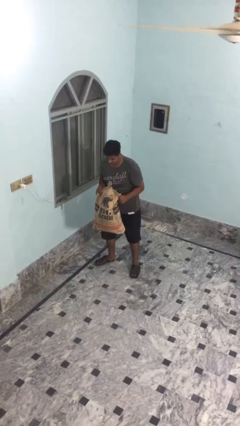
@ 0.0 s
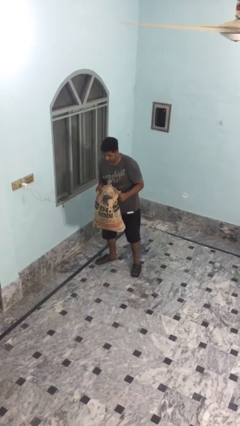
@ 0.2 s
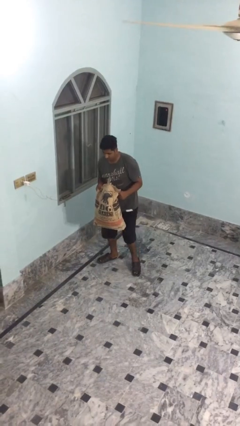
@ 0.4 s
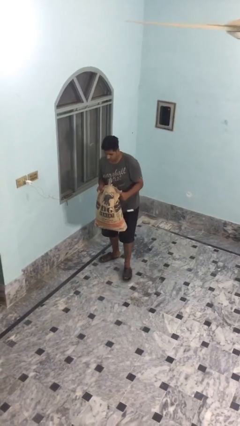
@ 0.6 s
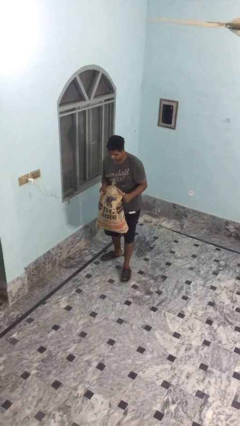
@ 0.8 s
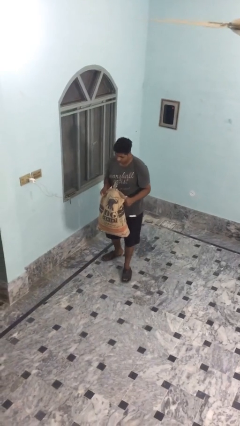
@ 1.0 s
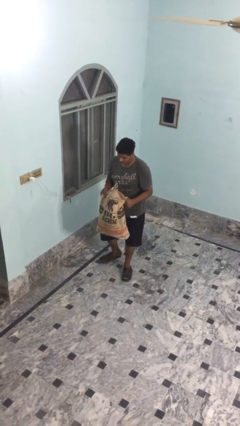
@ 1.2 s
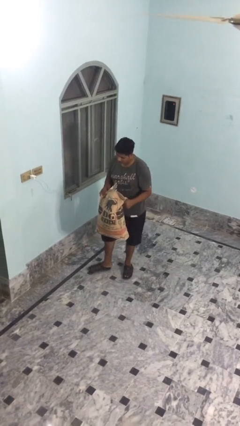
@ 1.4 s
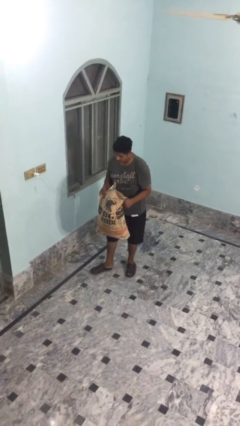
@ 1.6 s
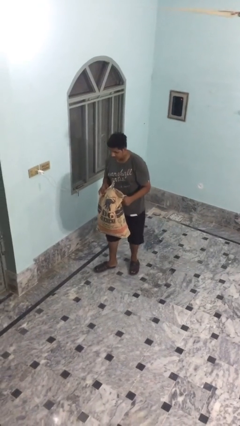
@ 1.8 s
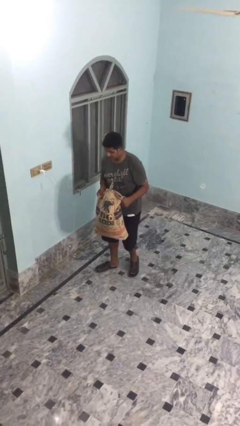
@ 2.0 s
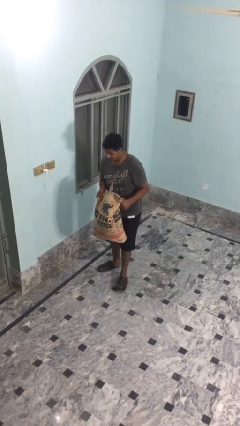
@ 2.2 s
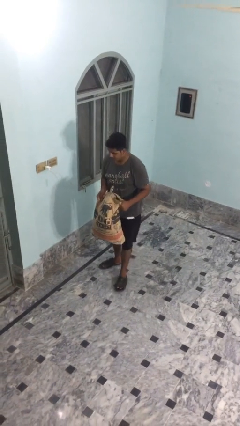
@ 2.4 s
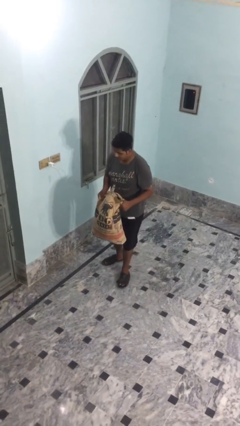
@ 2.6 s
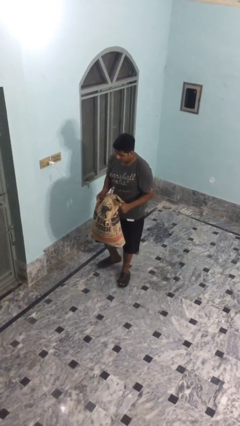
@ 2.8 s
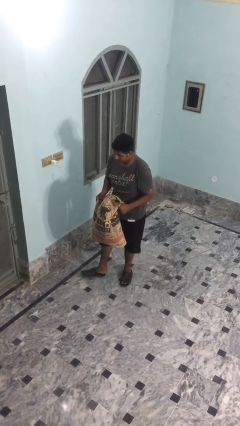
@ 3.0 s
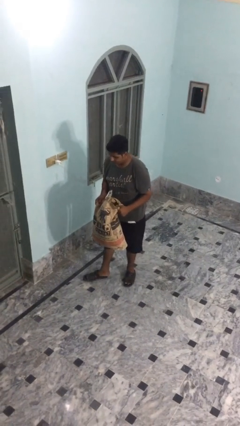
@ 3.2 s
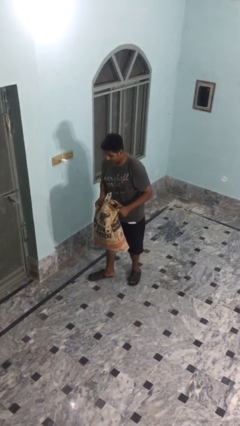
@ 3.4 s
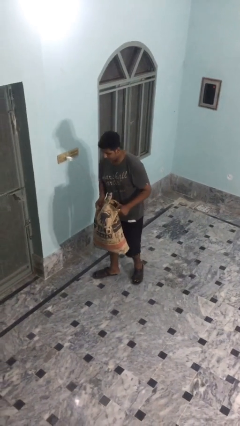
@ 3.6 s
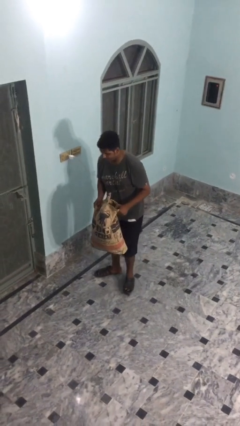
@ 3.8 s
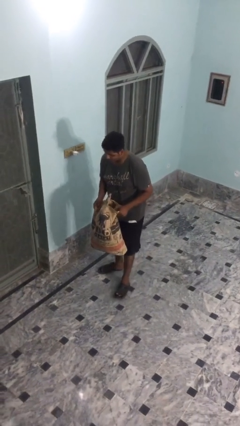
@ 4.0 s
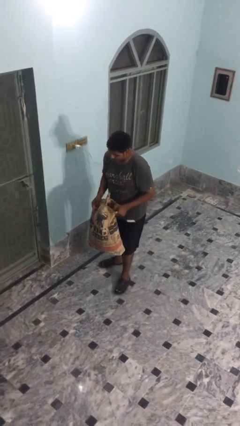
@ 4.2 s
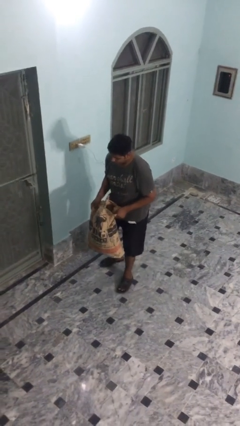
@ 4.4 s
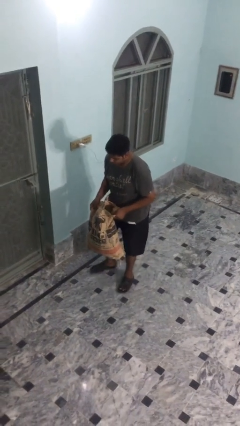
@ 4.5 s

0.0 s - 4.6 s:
person carries heavy object

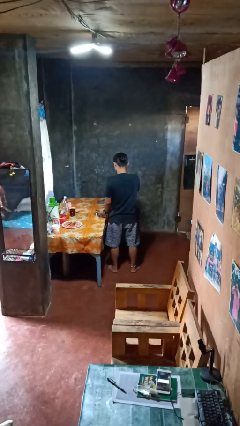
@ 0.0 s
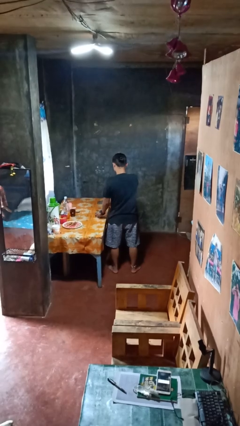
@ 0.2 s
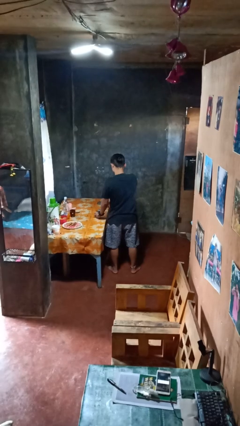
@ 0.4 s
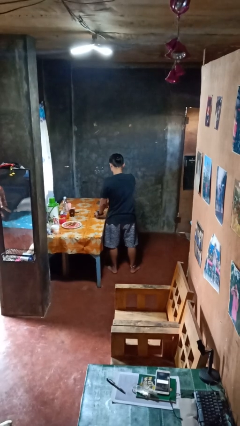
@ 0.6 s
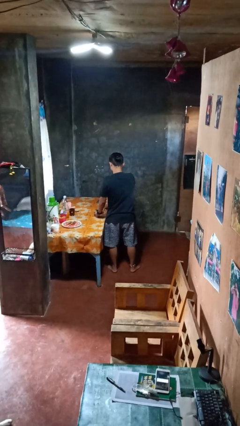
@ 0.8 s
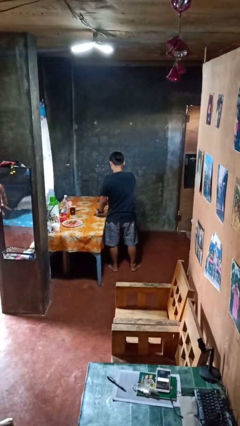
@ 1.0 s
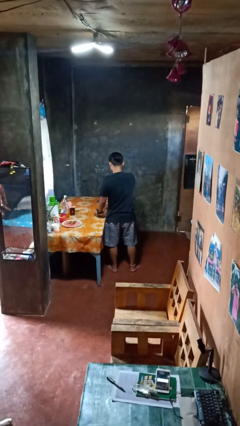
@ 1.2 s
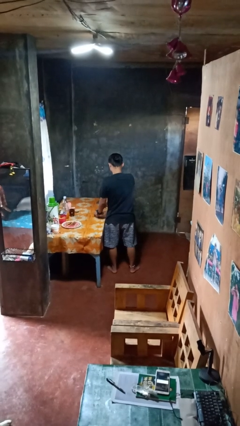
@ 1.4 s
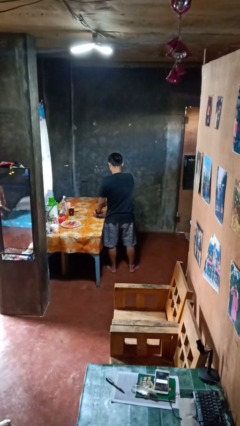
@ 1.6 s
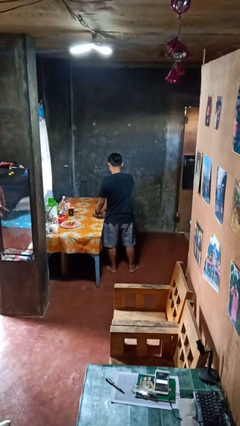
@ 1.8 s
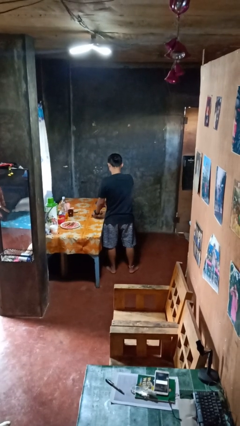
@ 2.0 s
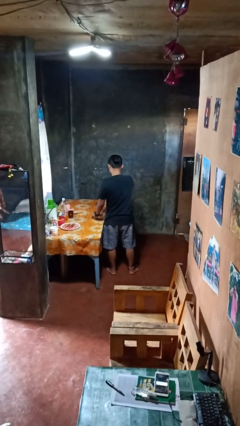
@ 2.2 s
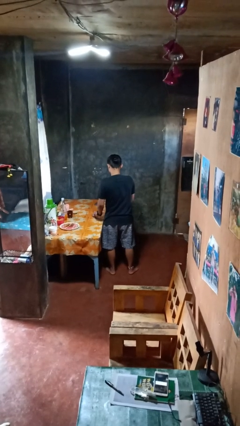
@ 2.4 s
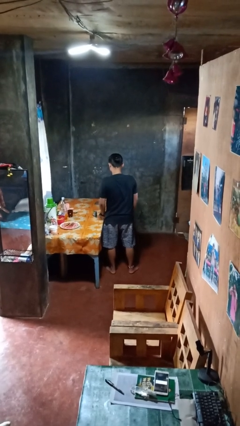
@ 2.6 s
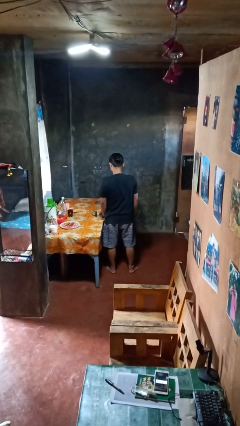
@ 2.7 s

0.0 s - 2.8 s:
person opens can with can opener

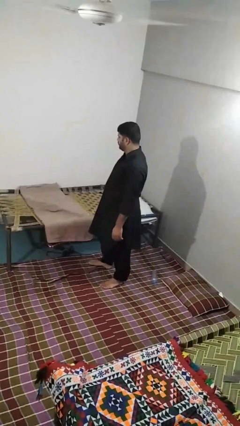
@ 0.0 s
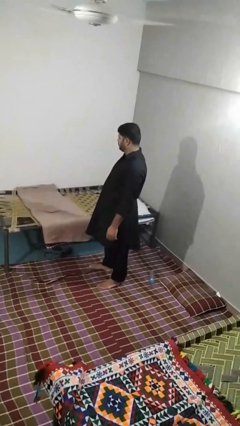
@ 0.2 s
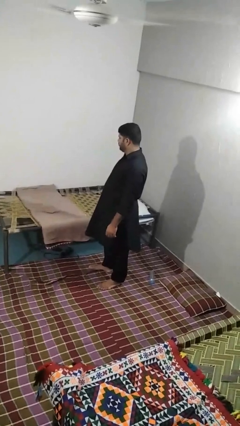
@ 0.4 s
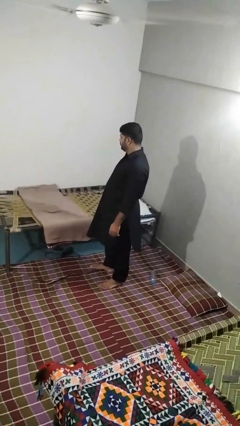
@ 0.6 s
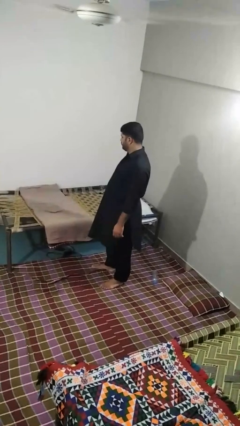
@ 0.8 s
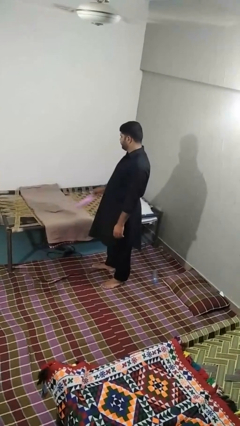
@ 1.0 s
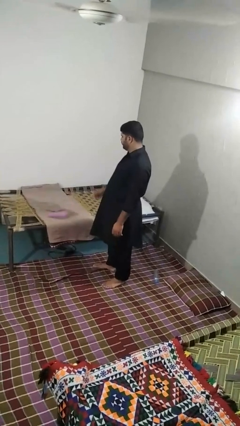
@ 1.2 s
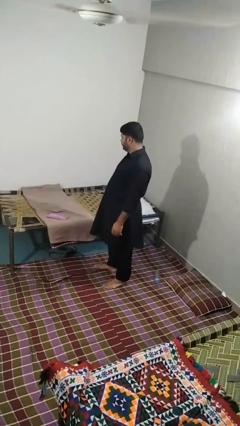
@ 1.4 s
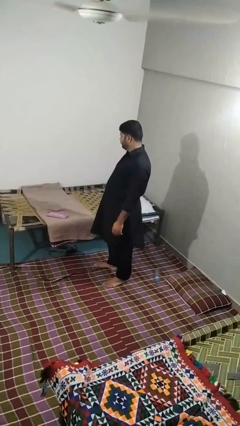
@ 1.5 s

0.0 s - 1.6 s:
person puts down object on bed

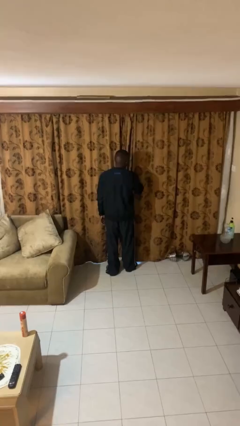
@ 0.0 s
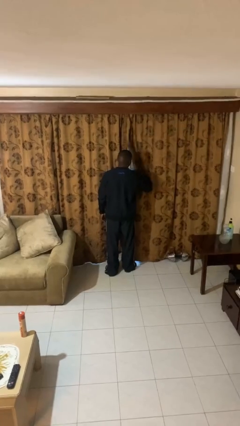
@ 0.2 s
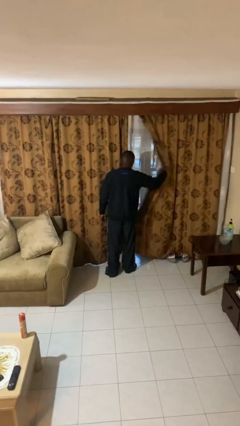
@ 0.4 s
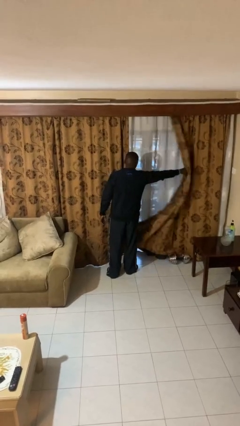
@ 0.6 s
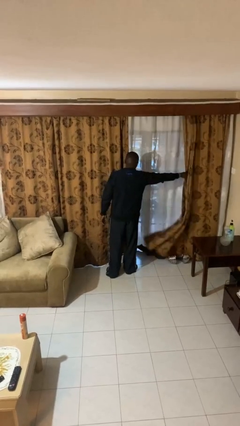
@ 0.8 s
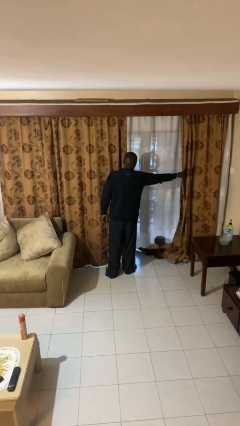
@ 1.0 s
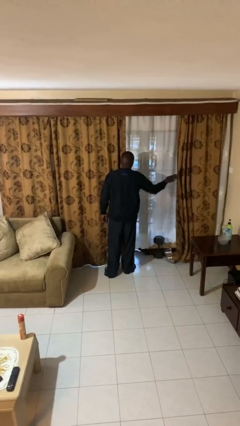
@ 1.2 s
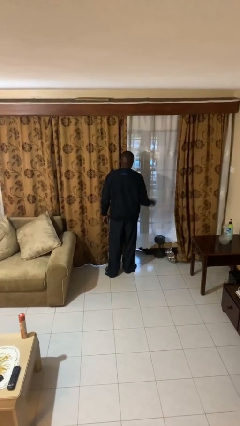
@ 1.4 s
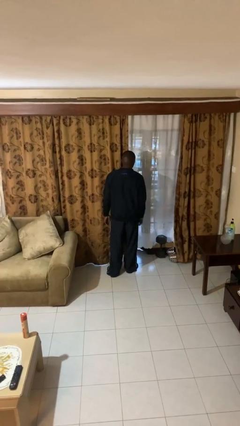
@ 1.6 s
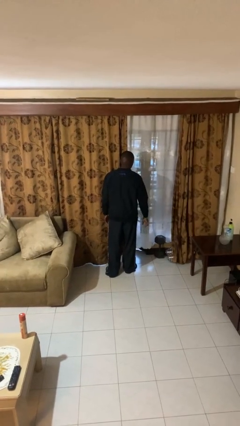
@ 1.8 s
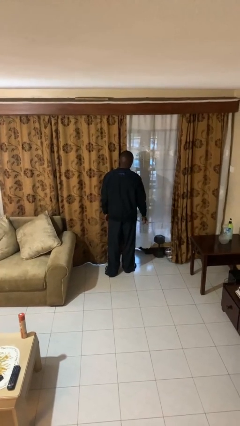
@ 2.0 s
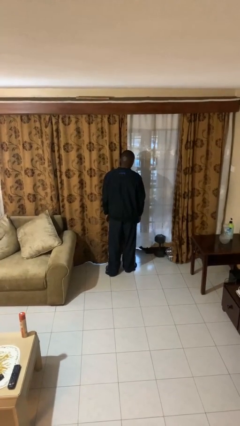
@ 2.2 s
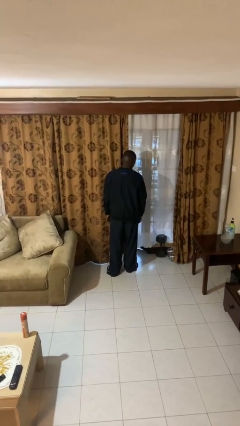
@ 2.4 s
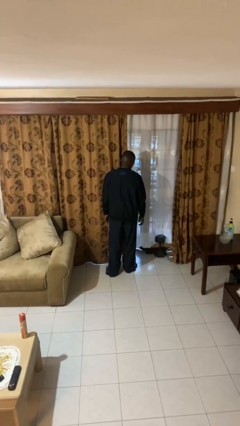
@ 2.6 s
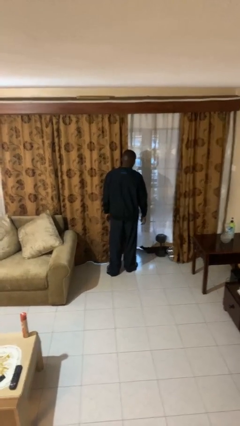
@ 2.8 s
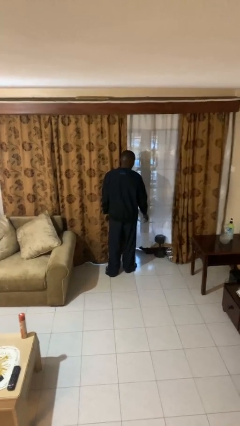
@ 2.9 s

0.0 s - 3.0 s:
person opens curtains

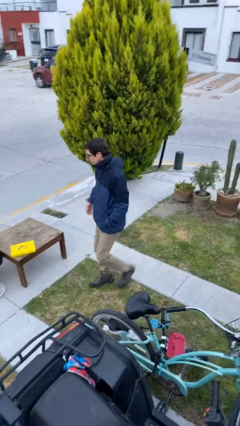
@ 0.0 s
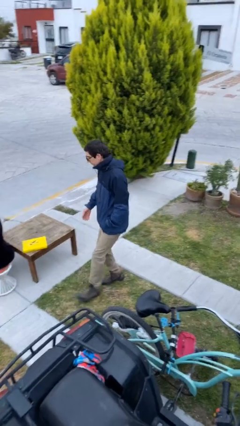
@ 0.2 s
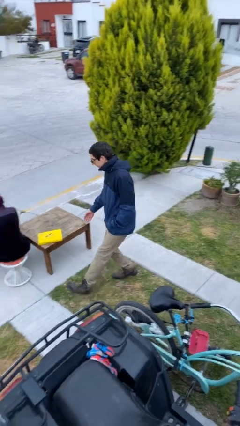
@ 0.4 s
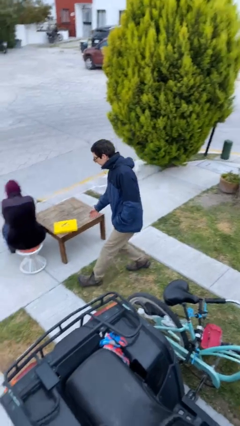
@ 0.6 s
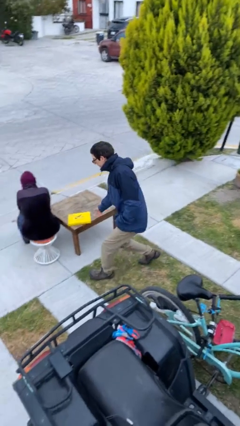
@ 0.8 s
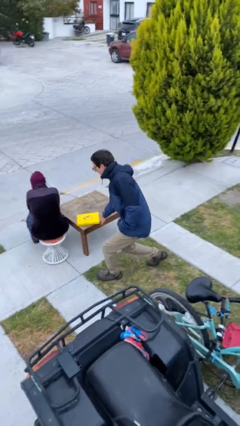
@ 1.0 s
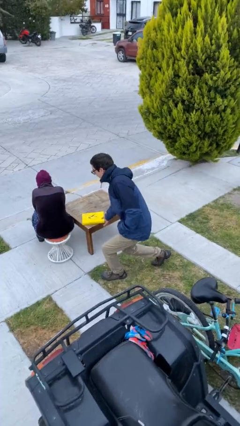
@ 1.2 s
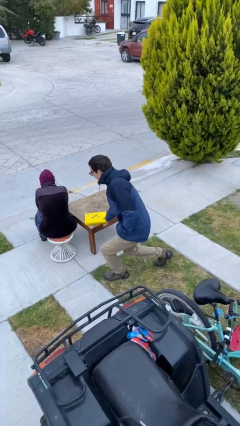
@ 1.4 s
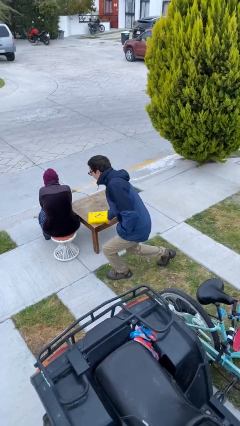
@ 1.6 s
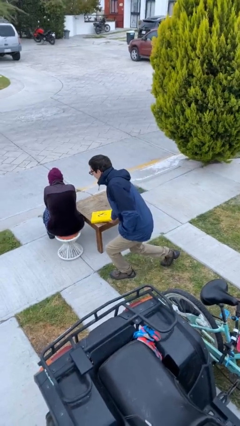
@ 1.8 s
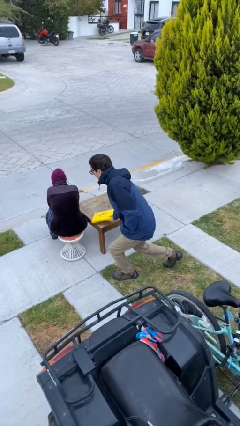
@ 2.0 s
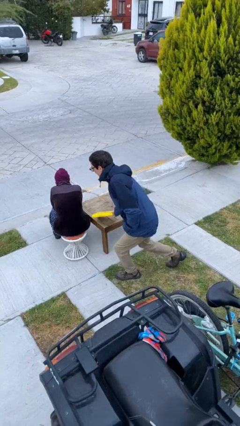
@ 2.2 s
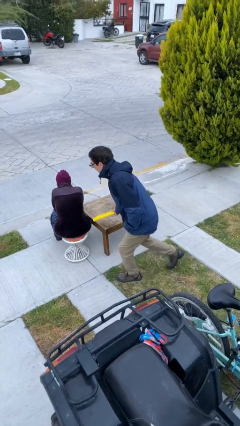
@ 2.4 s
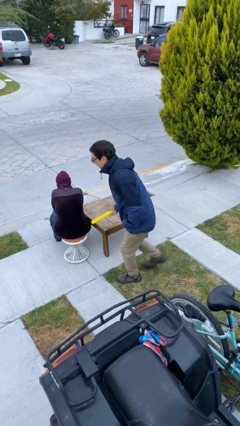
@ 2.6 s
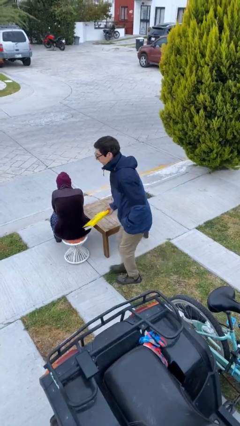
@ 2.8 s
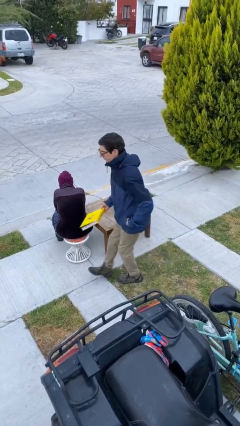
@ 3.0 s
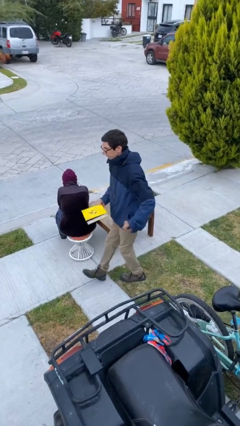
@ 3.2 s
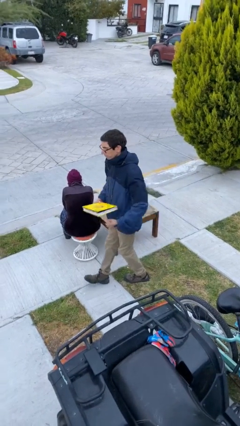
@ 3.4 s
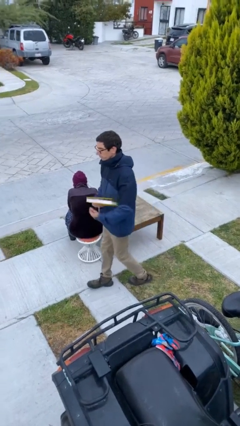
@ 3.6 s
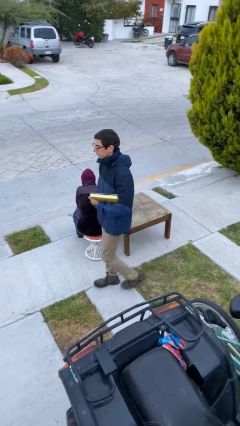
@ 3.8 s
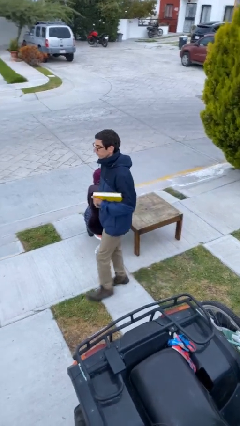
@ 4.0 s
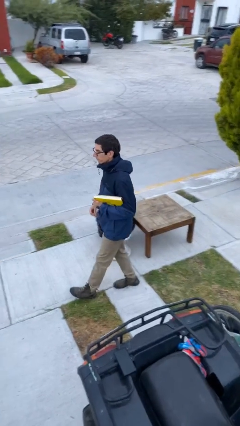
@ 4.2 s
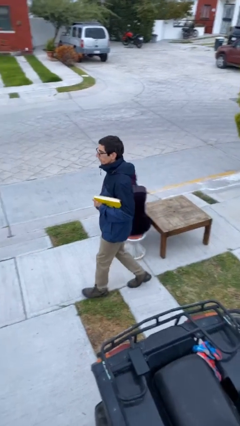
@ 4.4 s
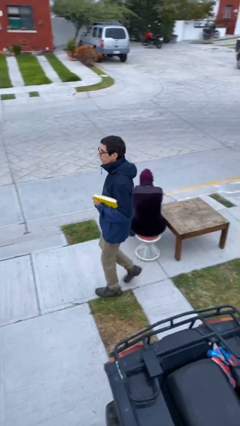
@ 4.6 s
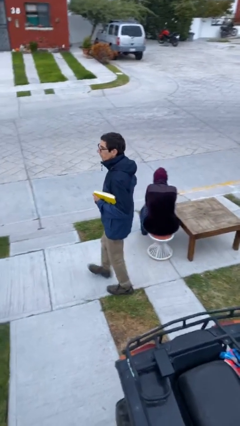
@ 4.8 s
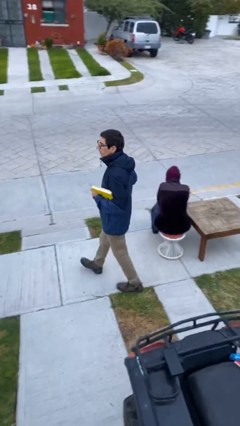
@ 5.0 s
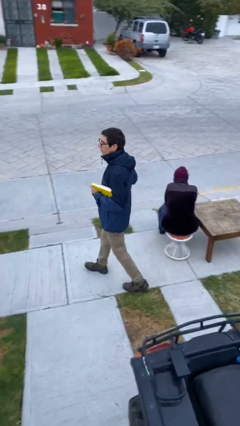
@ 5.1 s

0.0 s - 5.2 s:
person steals object from person

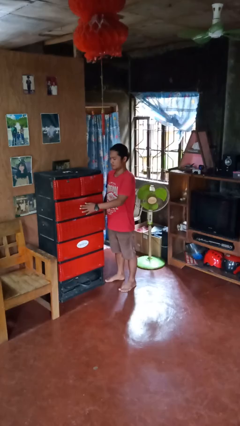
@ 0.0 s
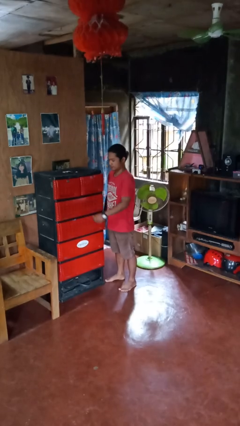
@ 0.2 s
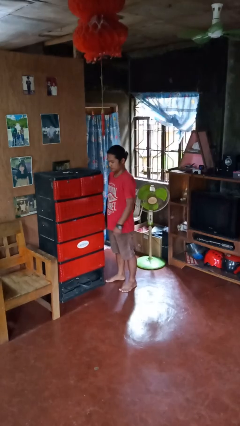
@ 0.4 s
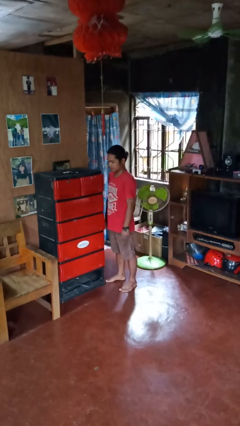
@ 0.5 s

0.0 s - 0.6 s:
person closes dresser drawer
